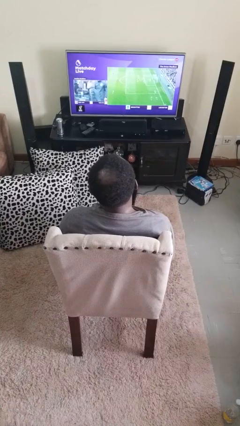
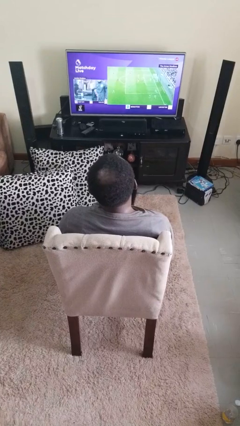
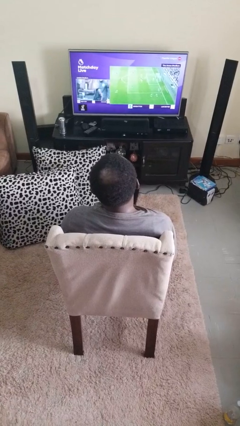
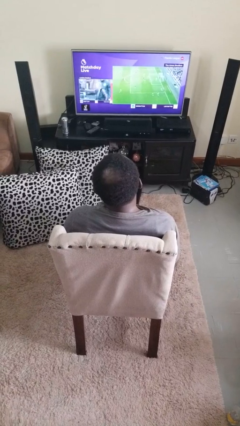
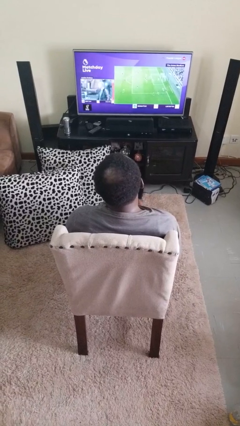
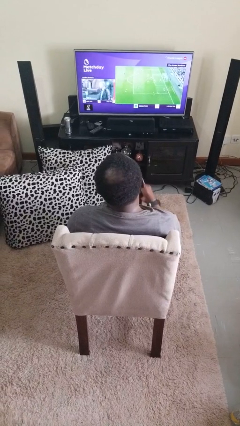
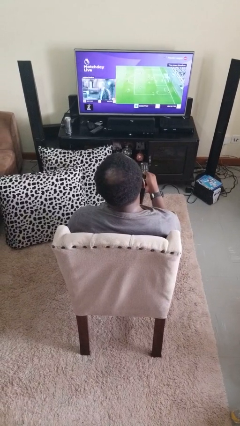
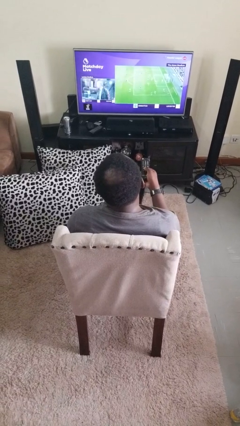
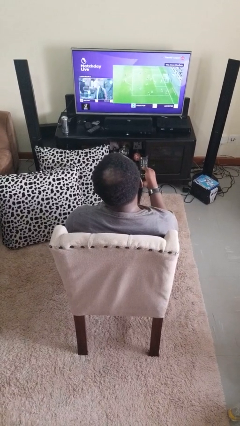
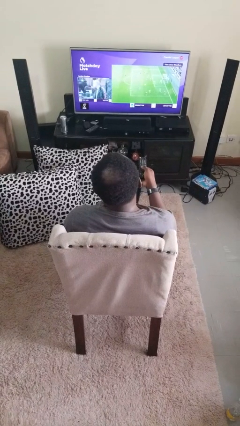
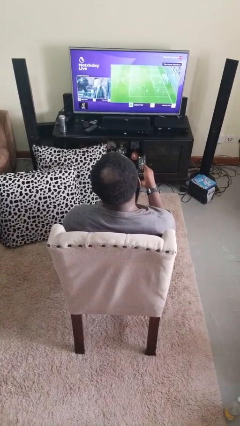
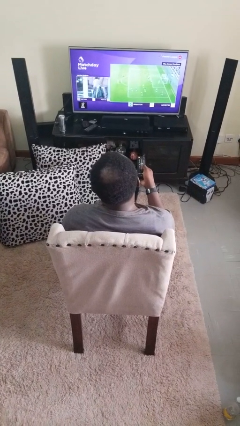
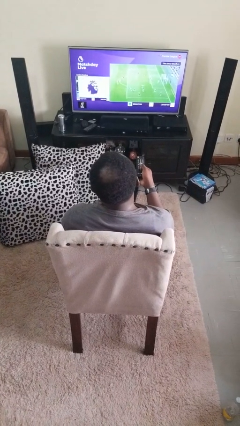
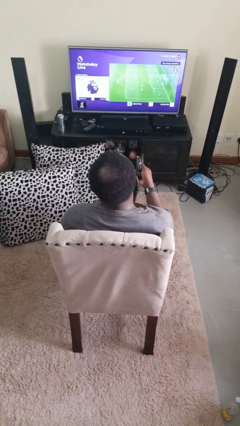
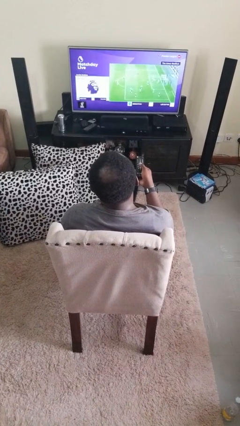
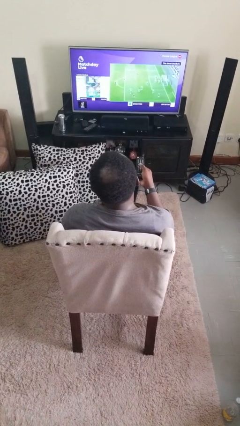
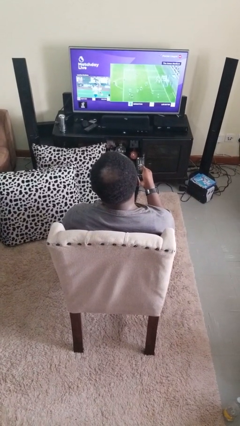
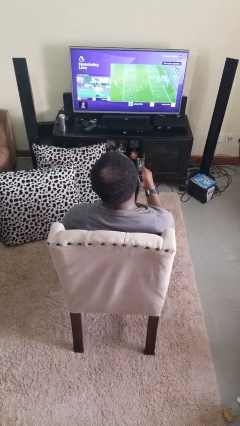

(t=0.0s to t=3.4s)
person uses television remote

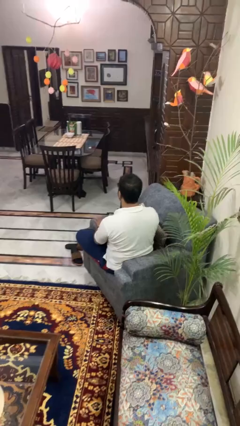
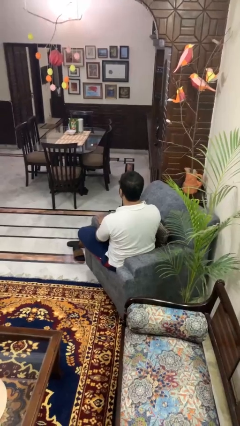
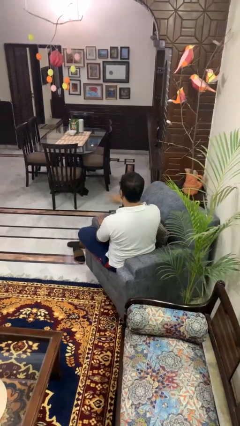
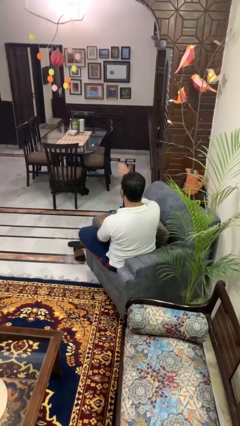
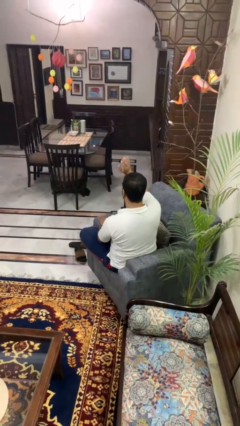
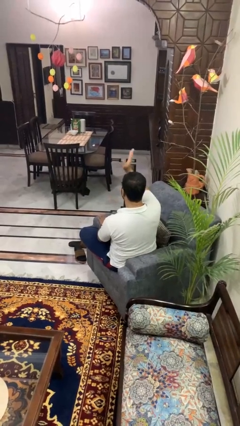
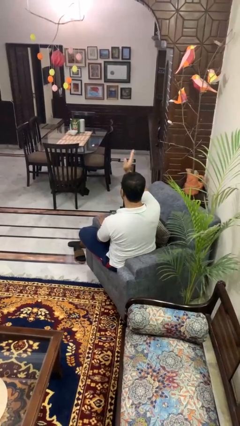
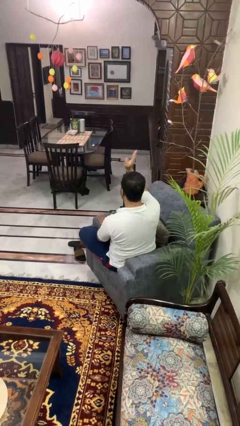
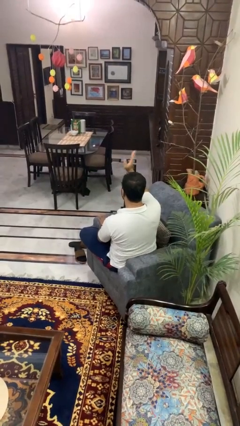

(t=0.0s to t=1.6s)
person waves at person

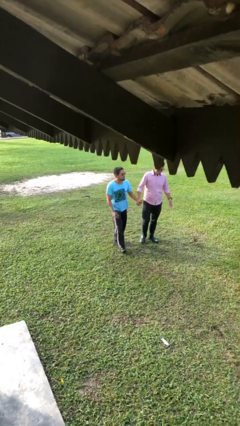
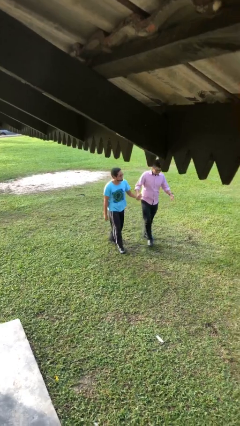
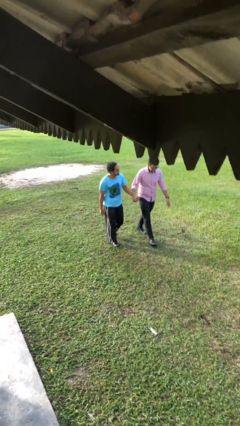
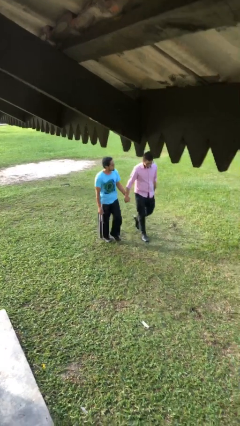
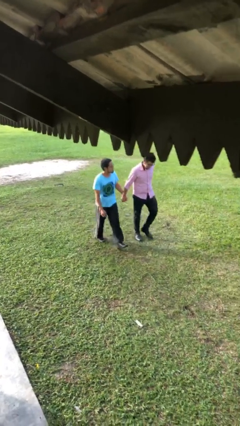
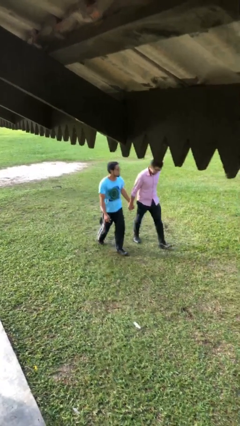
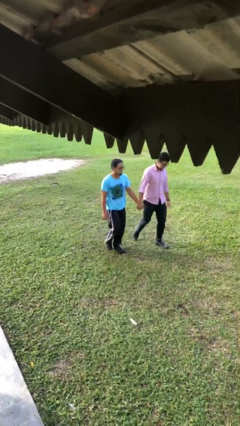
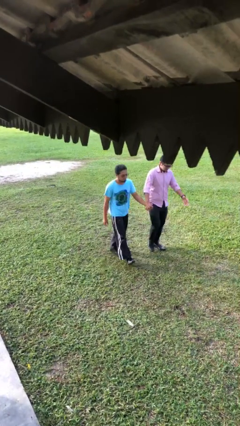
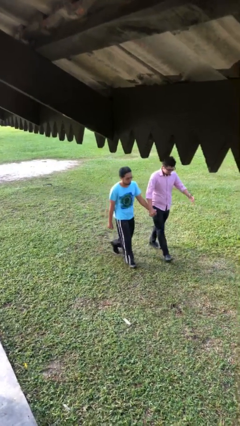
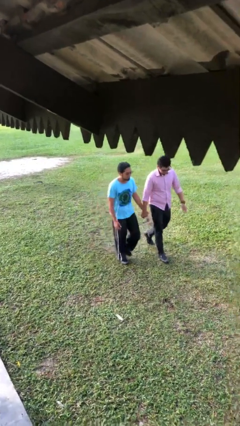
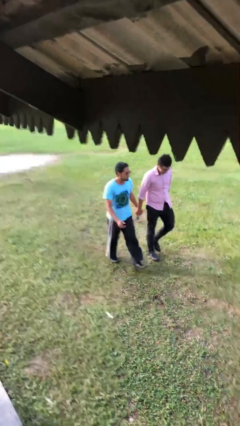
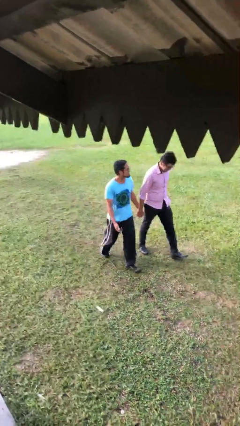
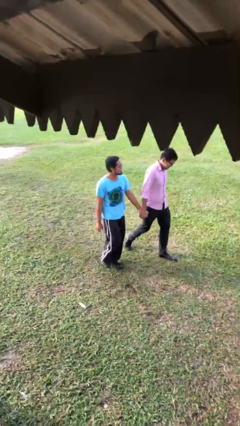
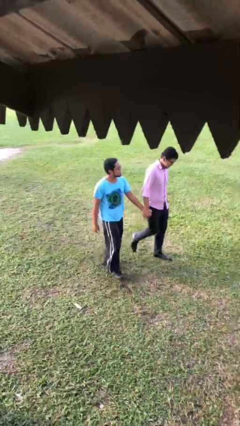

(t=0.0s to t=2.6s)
person holds hand

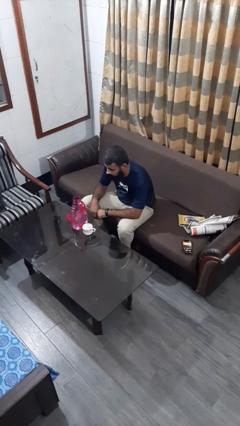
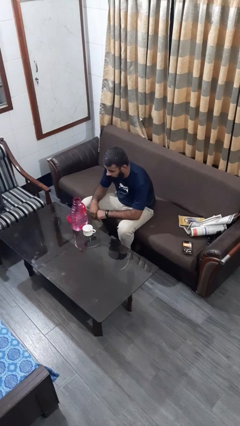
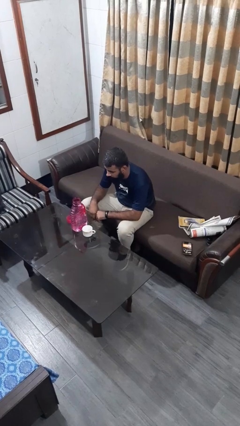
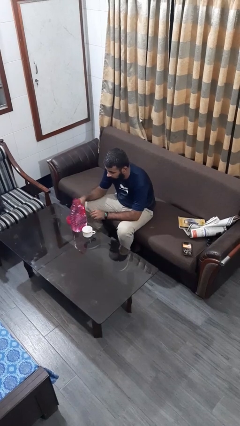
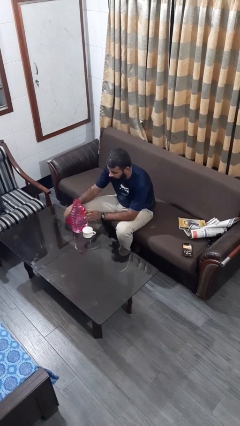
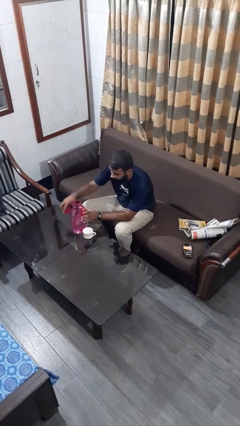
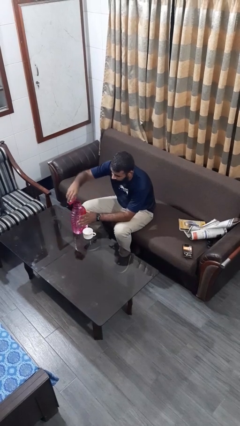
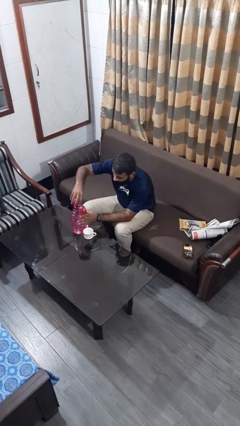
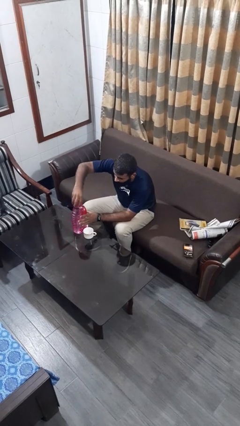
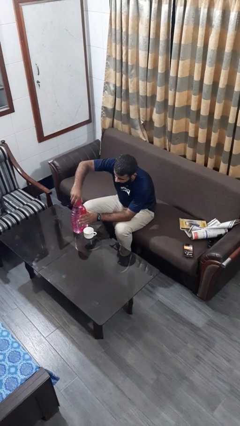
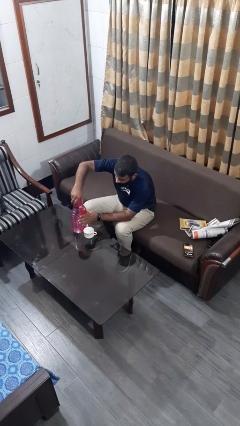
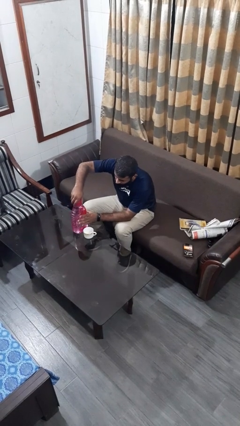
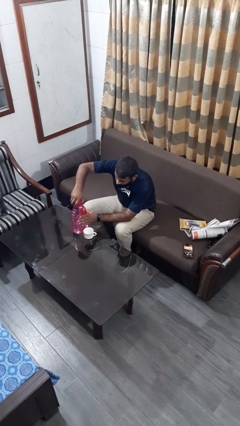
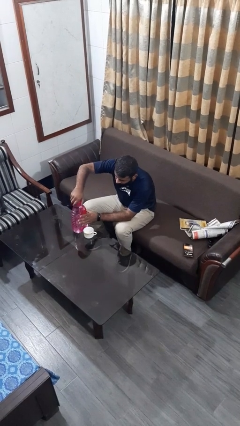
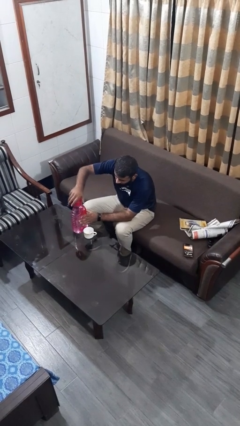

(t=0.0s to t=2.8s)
person screws lid to bottle

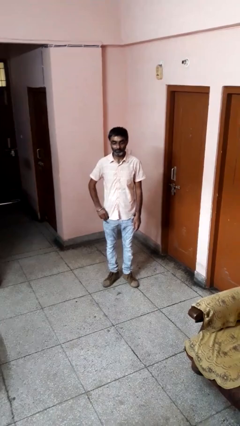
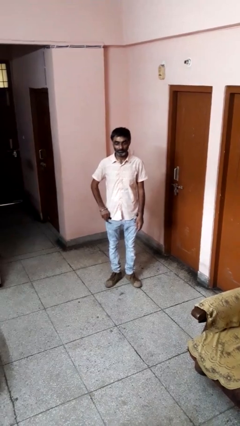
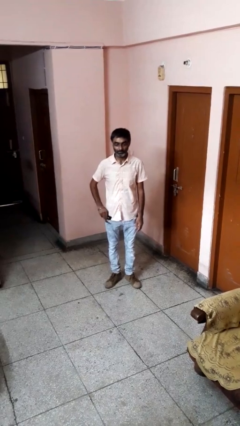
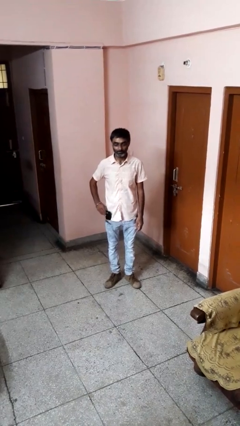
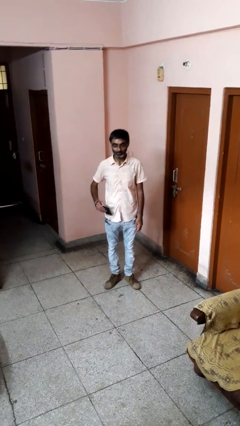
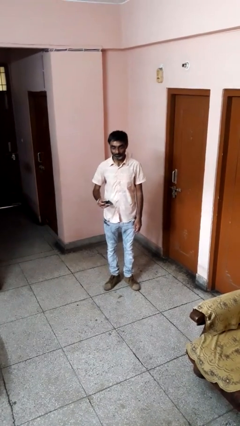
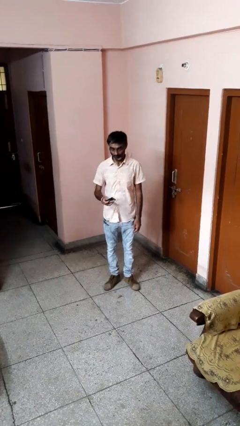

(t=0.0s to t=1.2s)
person takes phone from pocket

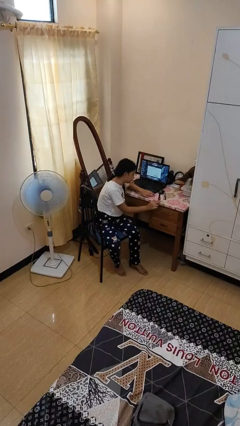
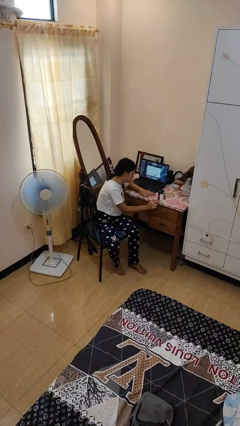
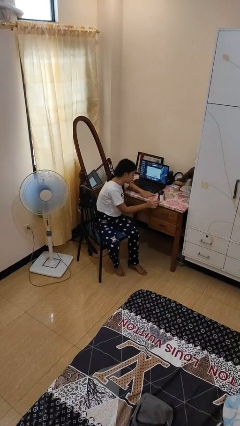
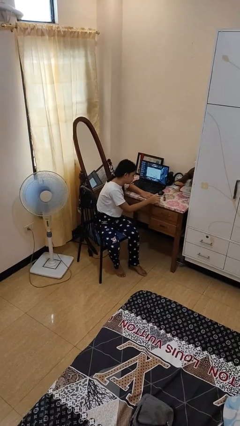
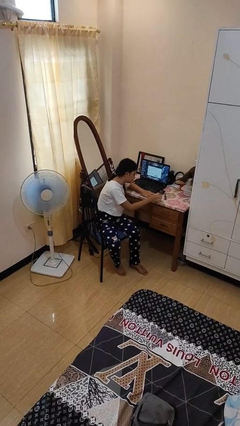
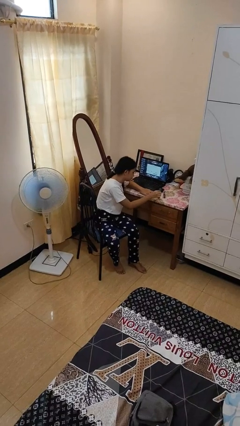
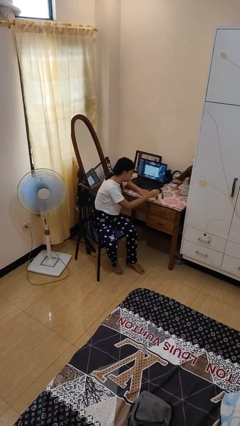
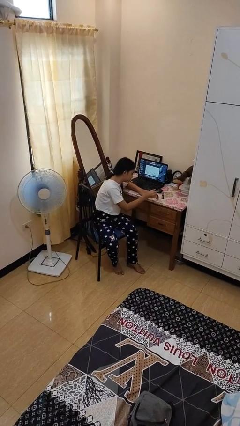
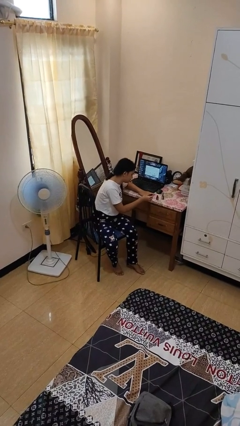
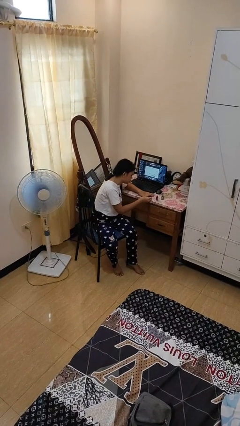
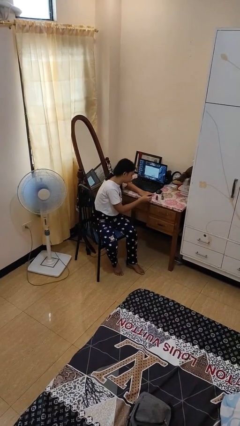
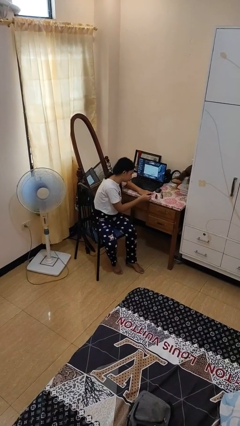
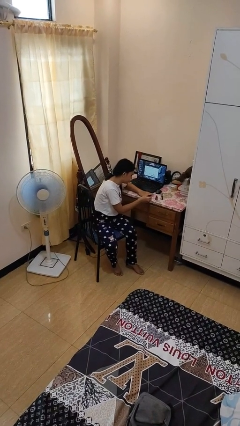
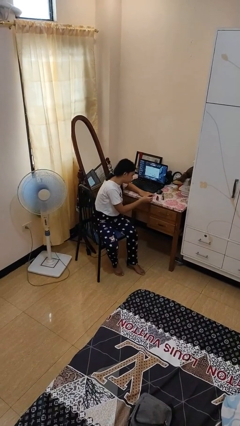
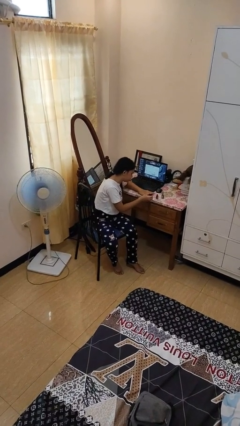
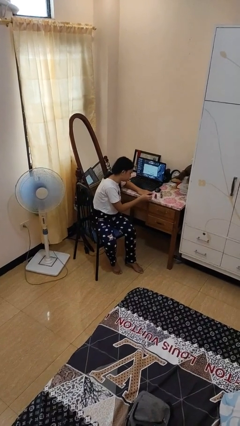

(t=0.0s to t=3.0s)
person paints fingernails

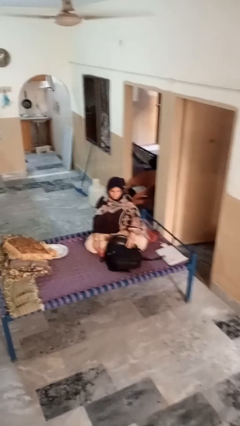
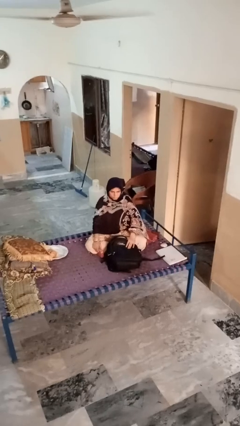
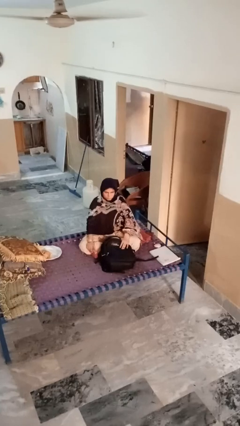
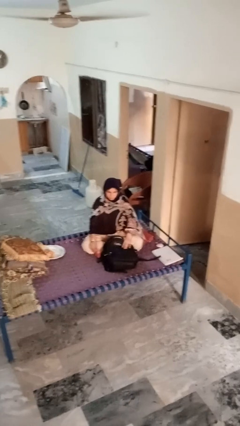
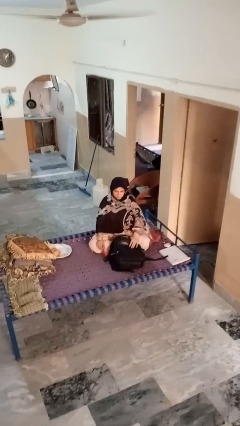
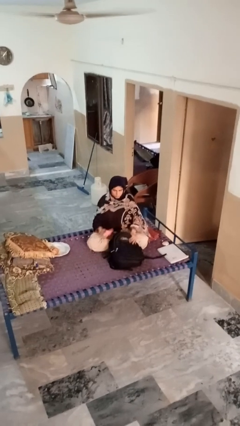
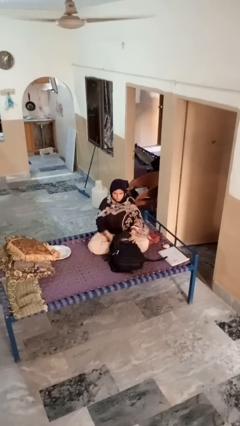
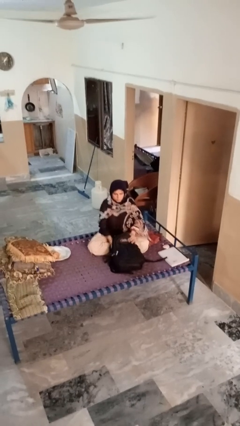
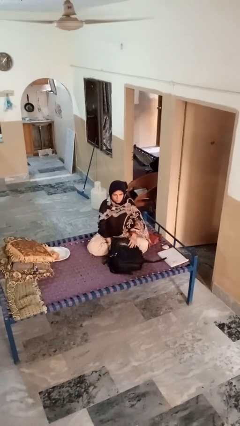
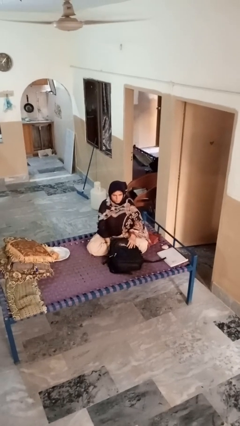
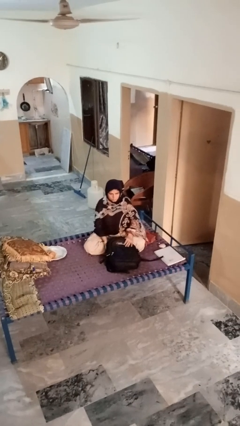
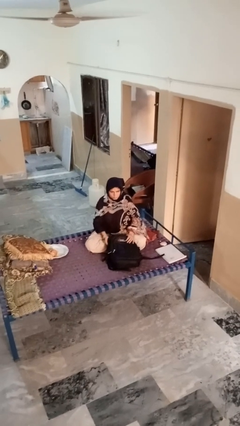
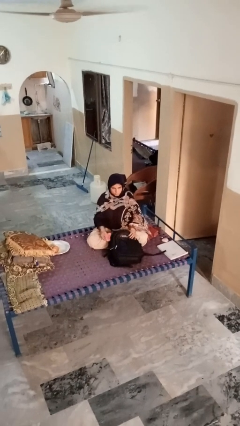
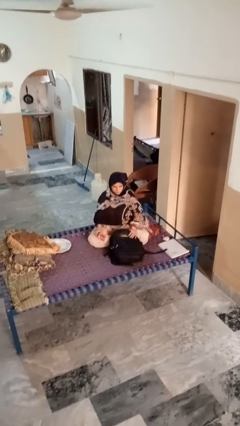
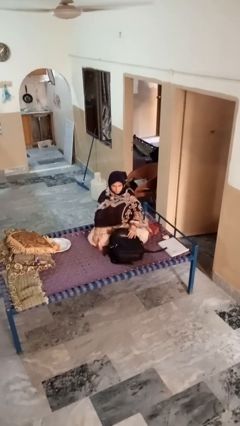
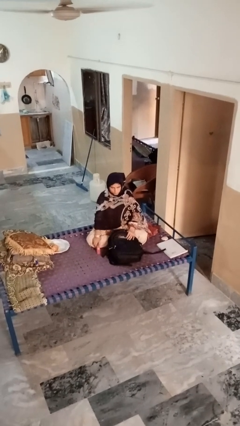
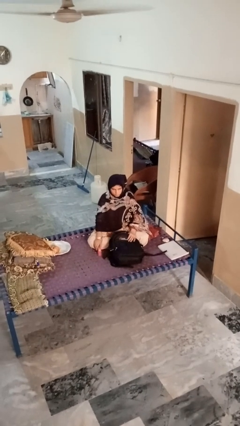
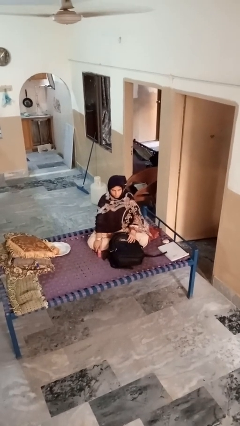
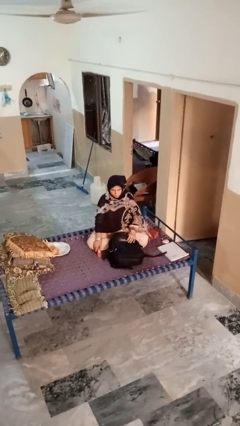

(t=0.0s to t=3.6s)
person takes object from bag
